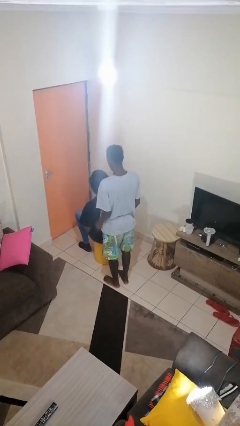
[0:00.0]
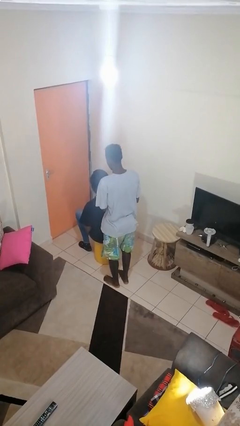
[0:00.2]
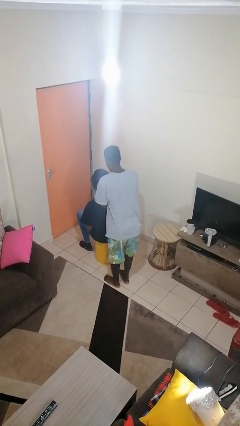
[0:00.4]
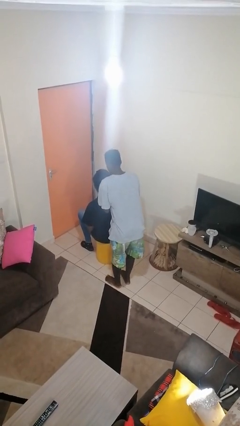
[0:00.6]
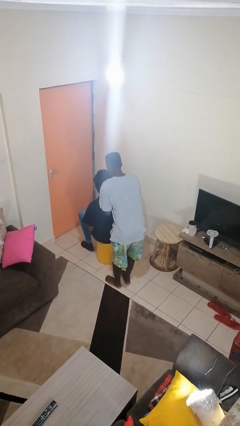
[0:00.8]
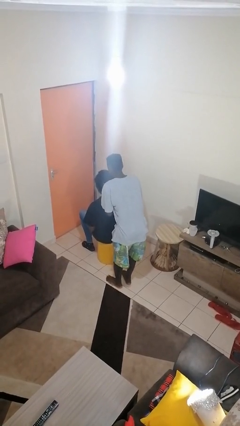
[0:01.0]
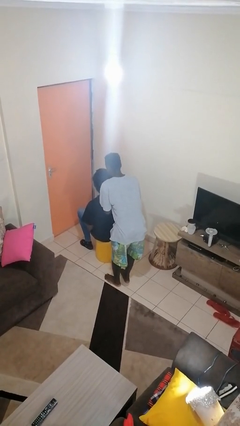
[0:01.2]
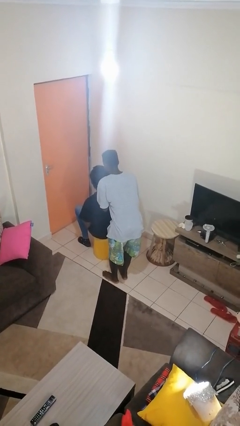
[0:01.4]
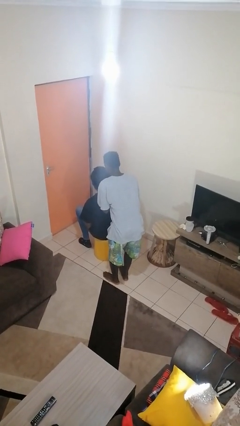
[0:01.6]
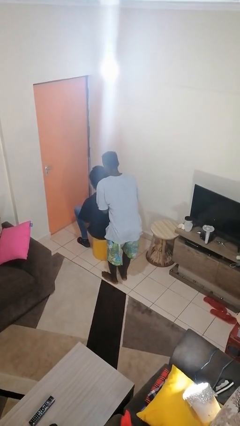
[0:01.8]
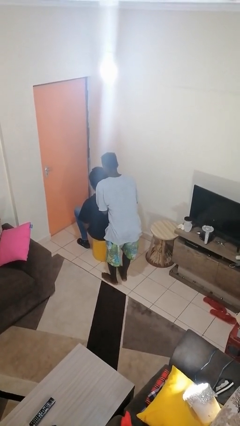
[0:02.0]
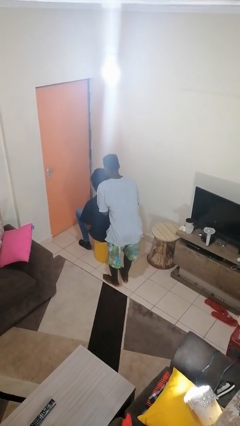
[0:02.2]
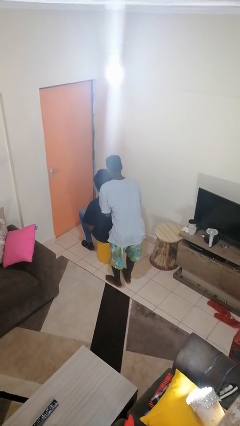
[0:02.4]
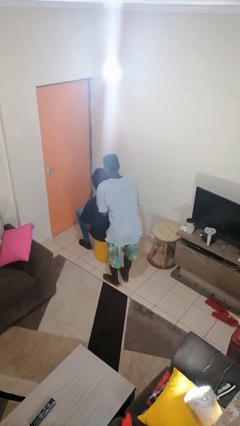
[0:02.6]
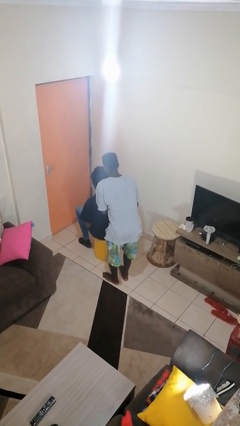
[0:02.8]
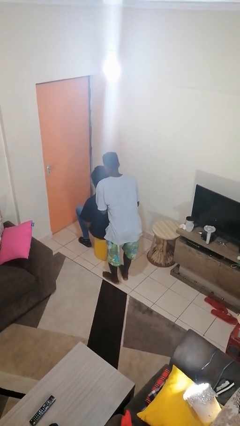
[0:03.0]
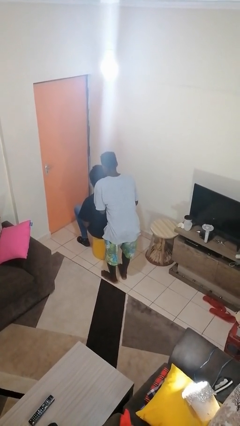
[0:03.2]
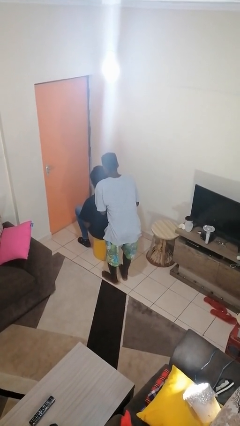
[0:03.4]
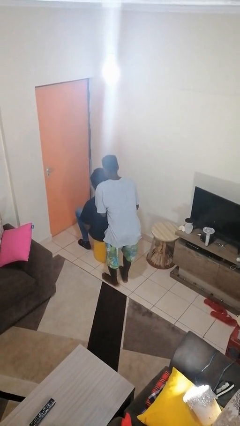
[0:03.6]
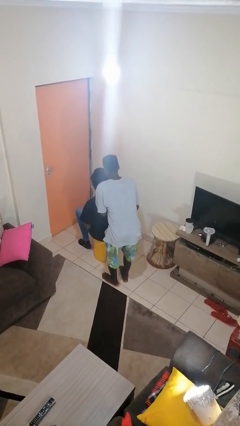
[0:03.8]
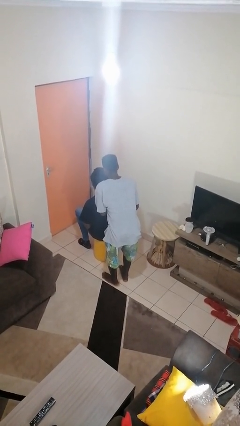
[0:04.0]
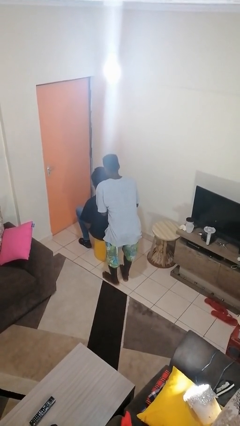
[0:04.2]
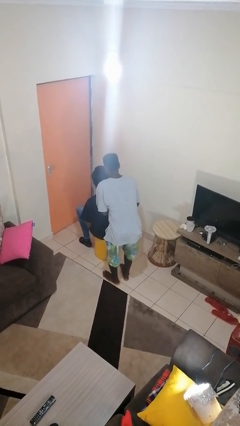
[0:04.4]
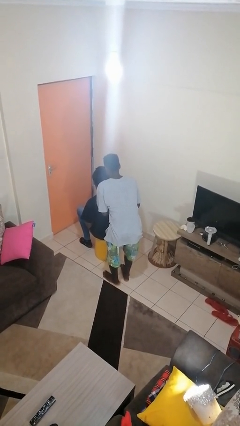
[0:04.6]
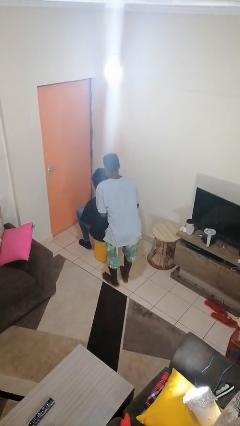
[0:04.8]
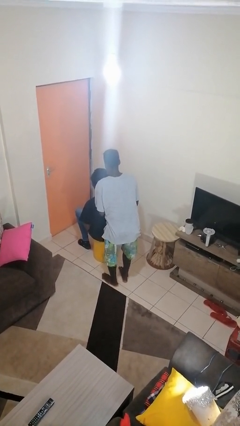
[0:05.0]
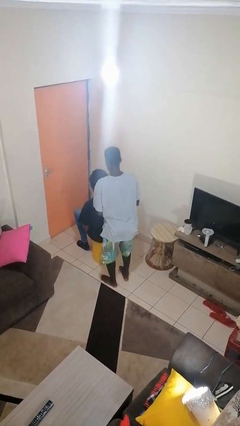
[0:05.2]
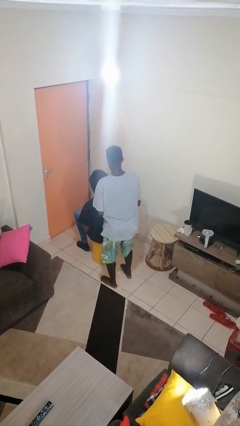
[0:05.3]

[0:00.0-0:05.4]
person braids hair of person

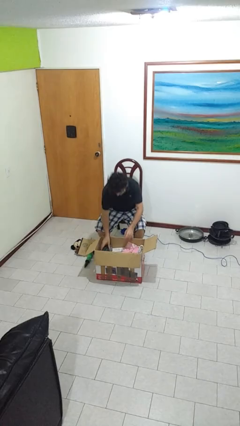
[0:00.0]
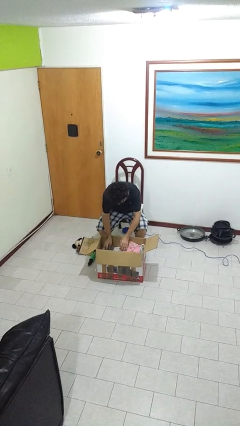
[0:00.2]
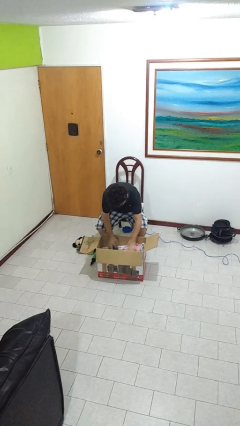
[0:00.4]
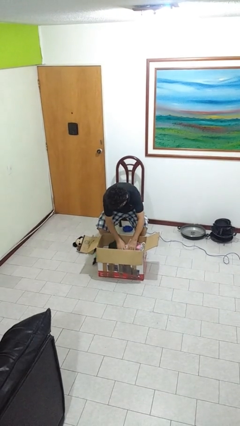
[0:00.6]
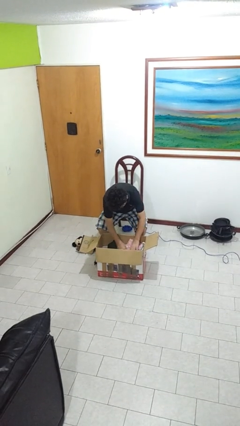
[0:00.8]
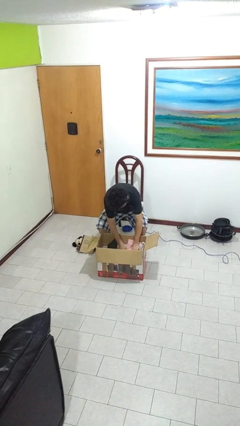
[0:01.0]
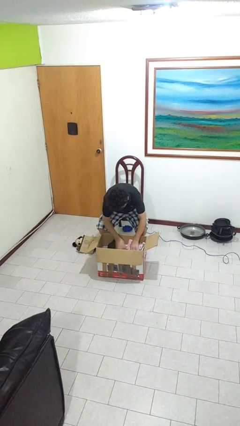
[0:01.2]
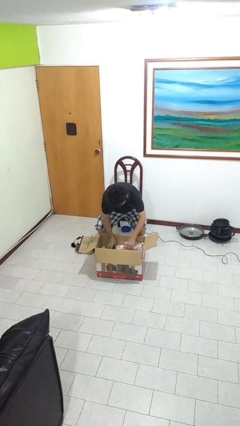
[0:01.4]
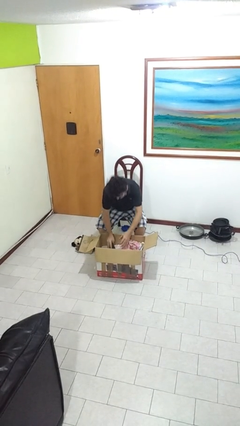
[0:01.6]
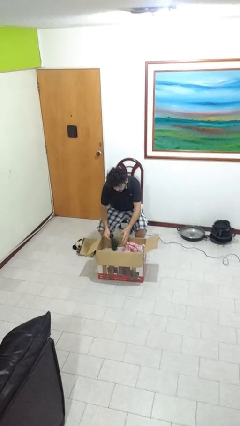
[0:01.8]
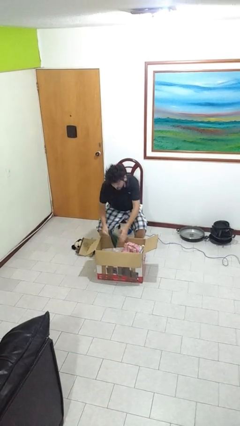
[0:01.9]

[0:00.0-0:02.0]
person searches in box

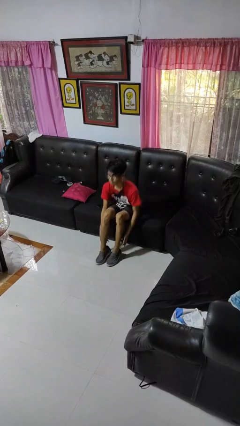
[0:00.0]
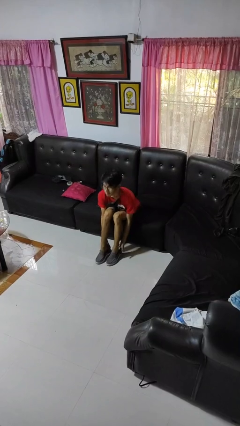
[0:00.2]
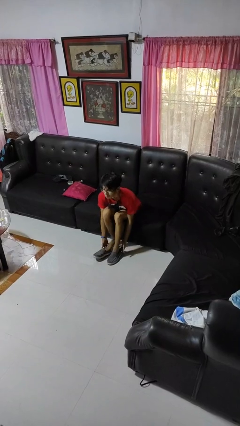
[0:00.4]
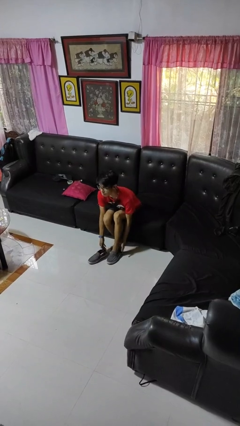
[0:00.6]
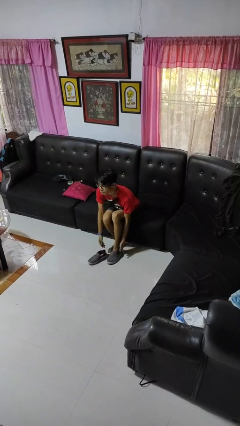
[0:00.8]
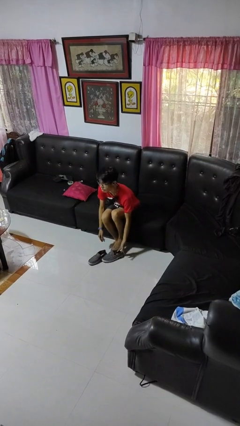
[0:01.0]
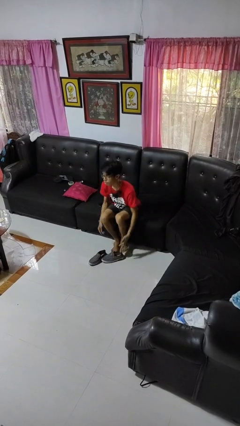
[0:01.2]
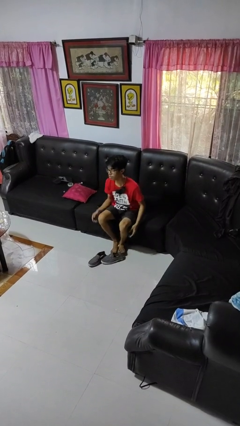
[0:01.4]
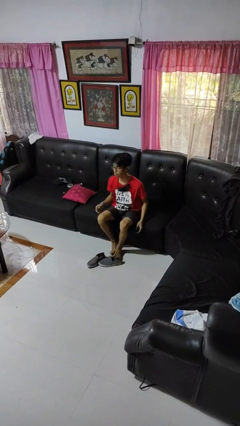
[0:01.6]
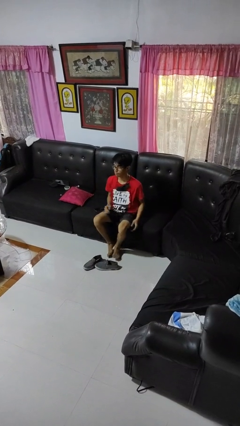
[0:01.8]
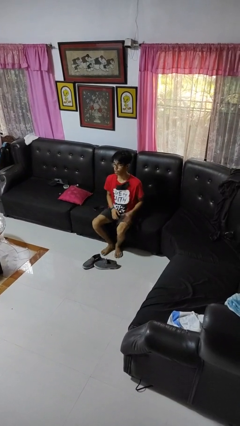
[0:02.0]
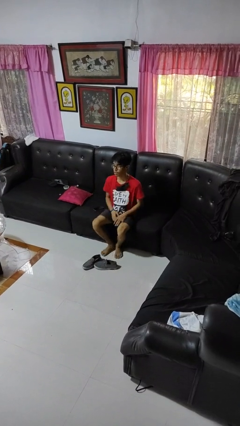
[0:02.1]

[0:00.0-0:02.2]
person takes off shoes

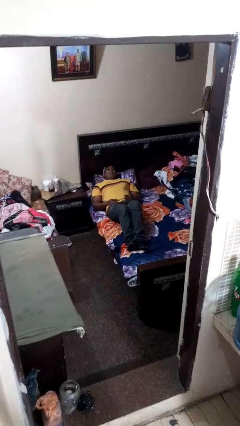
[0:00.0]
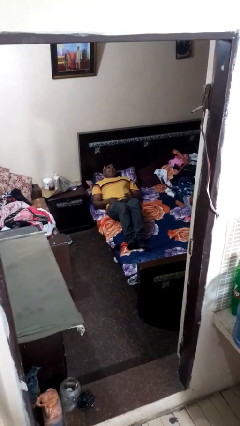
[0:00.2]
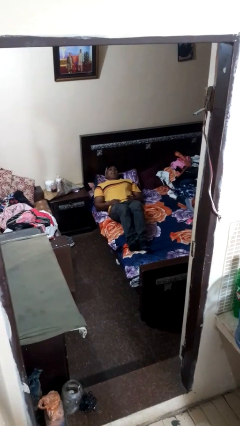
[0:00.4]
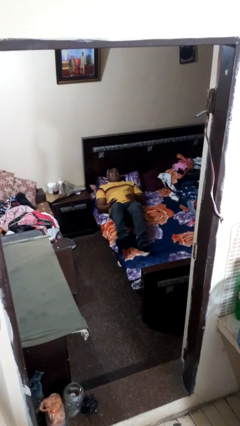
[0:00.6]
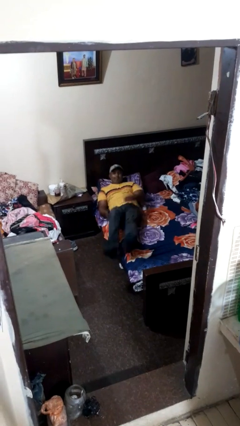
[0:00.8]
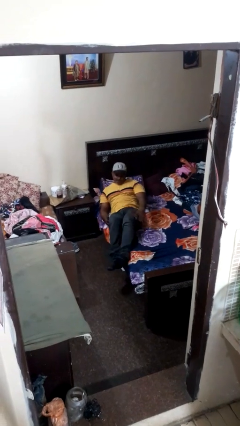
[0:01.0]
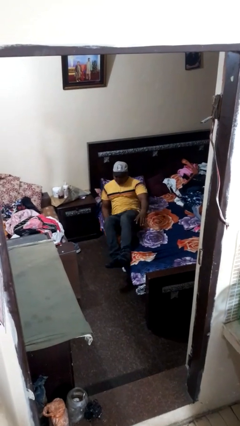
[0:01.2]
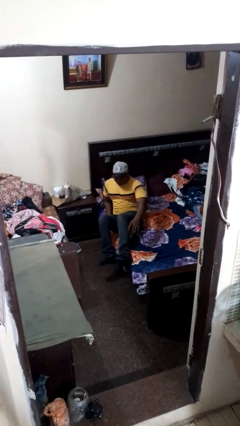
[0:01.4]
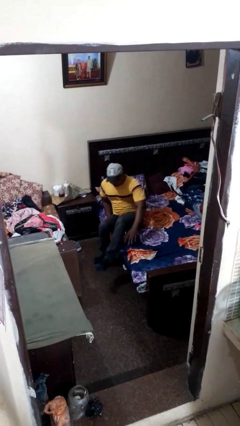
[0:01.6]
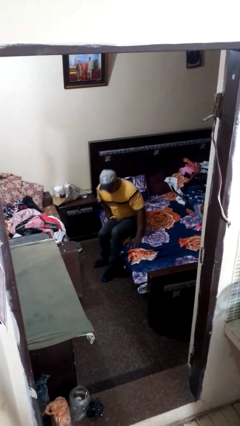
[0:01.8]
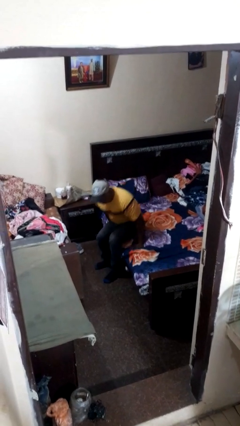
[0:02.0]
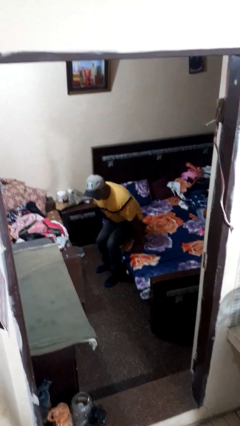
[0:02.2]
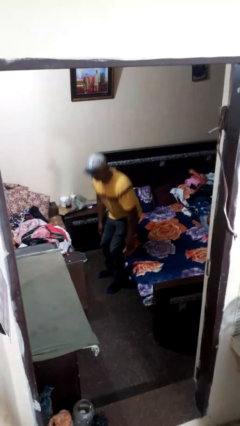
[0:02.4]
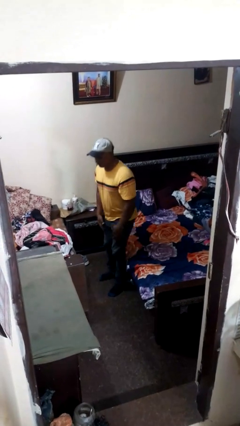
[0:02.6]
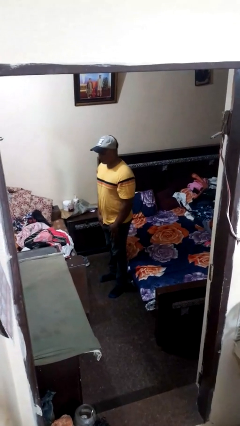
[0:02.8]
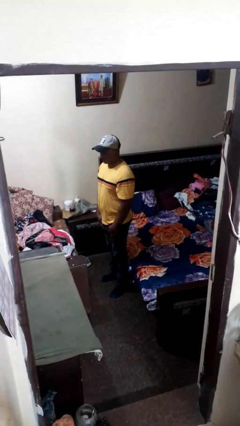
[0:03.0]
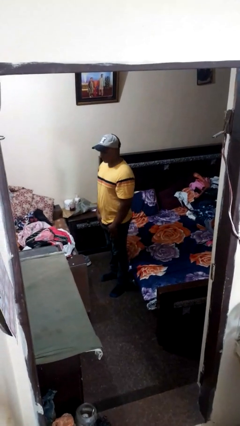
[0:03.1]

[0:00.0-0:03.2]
person stands up

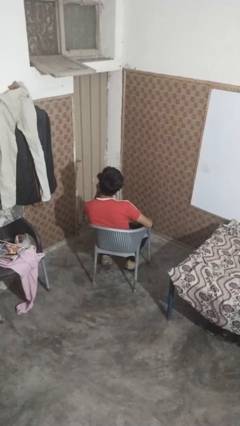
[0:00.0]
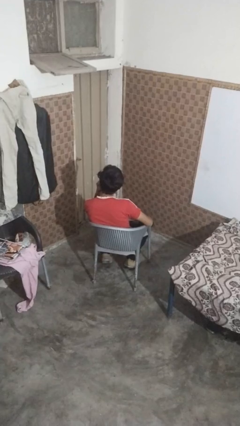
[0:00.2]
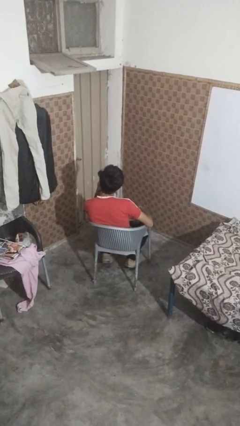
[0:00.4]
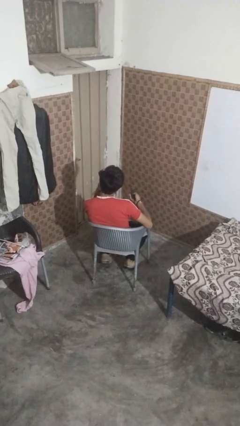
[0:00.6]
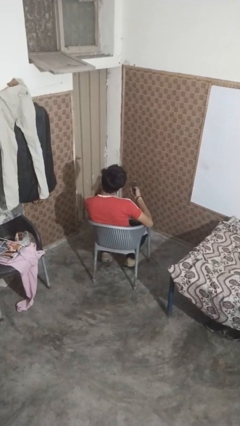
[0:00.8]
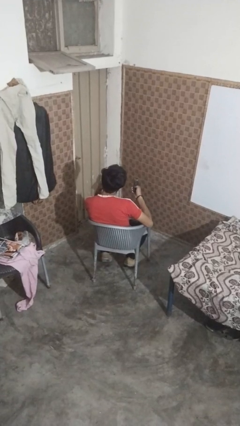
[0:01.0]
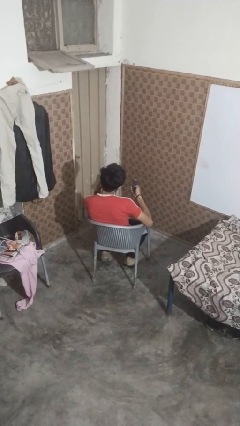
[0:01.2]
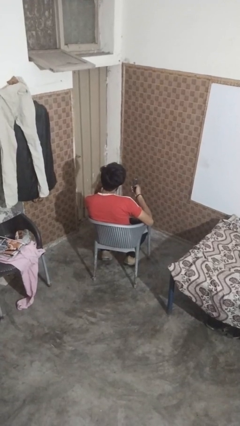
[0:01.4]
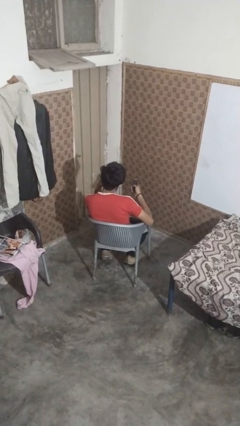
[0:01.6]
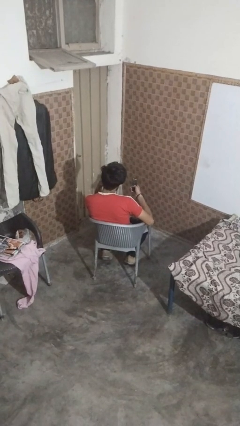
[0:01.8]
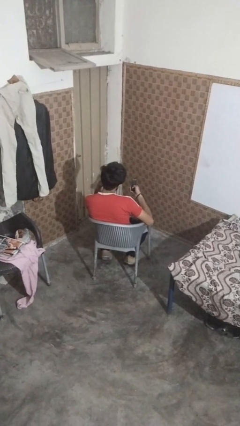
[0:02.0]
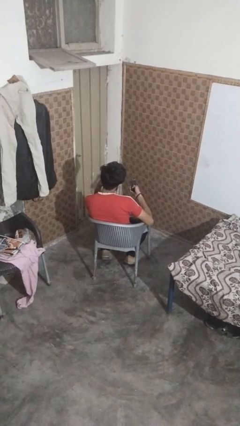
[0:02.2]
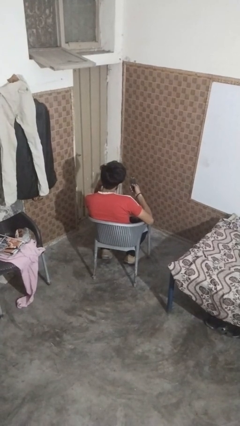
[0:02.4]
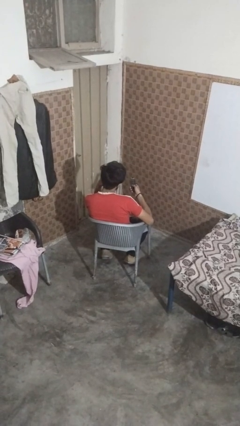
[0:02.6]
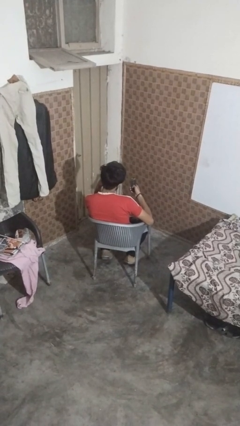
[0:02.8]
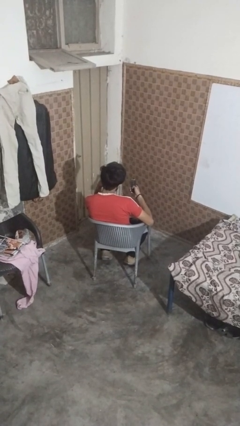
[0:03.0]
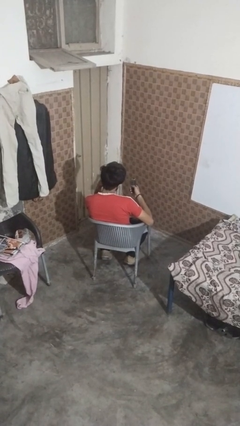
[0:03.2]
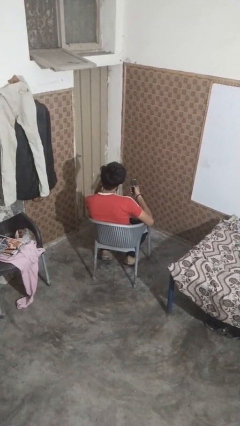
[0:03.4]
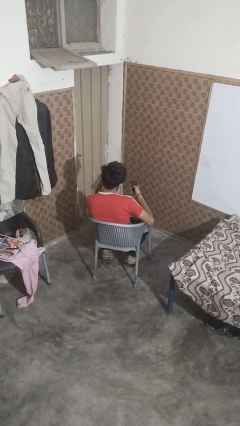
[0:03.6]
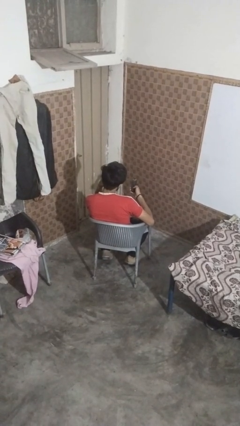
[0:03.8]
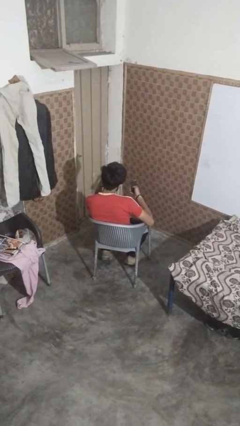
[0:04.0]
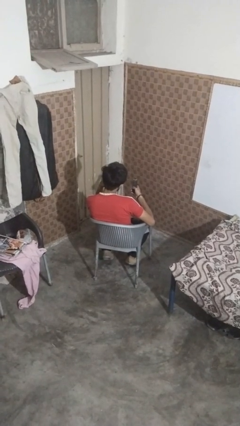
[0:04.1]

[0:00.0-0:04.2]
person uses television remote
